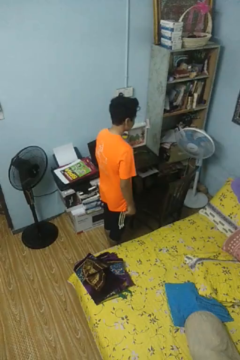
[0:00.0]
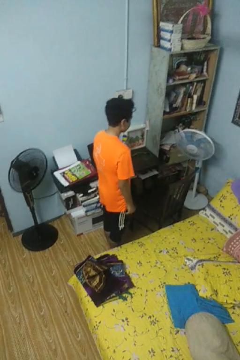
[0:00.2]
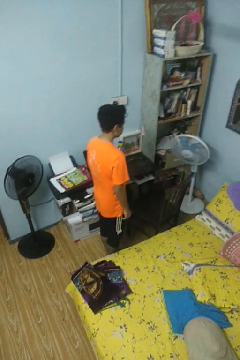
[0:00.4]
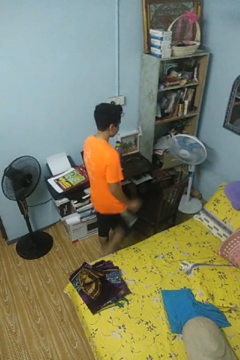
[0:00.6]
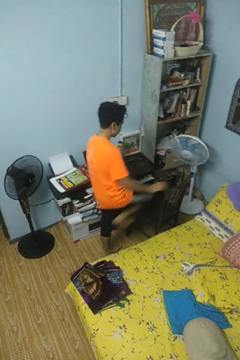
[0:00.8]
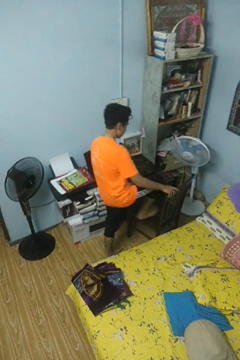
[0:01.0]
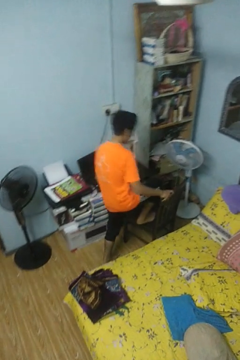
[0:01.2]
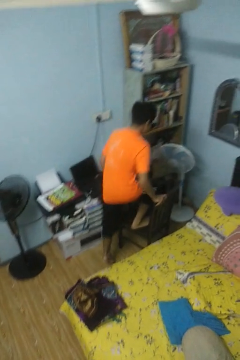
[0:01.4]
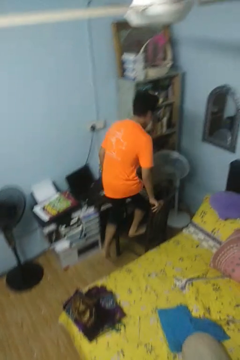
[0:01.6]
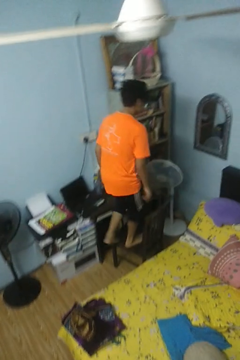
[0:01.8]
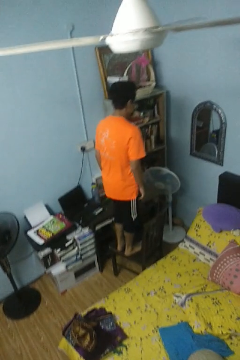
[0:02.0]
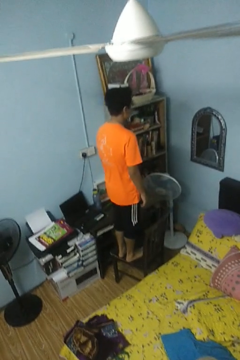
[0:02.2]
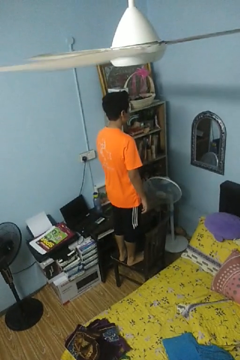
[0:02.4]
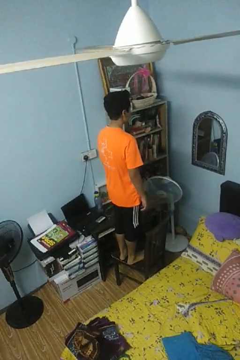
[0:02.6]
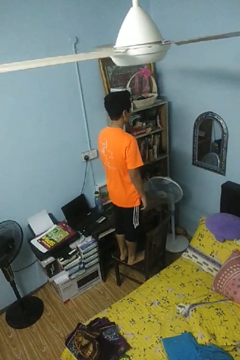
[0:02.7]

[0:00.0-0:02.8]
person climbs on chair

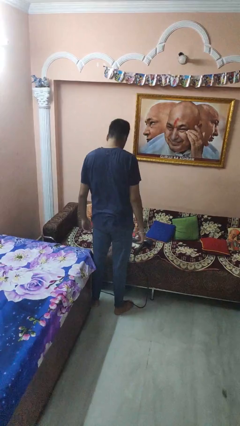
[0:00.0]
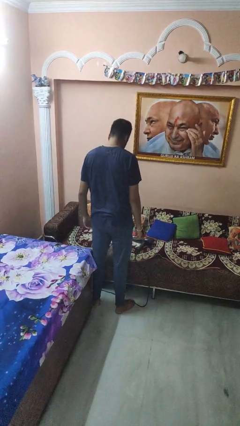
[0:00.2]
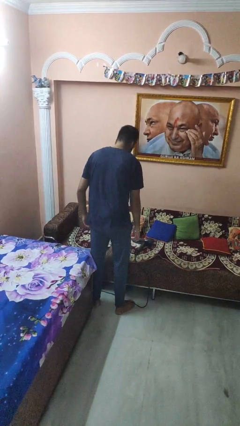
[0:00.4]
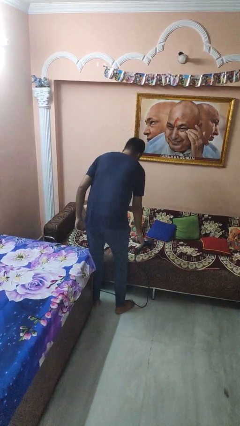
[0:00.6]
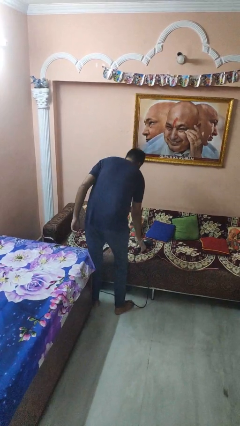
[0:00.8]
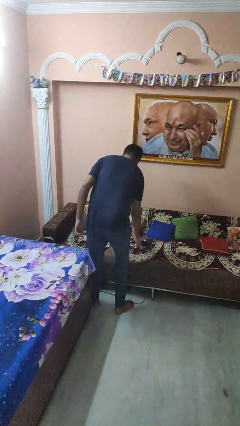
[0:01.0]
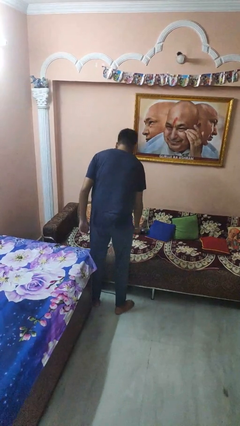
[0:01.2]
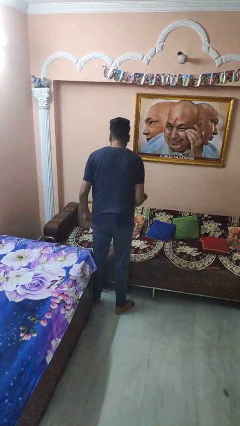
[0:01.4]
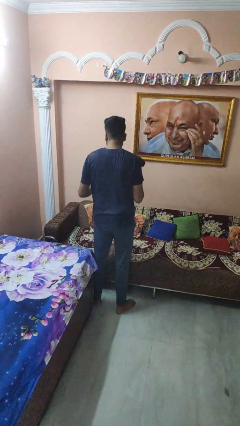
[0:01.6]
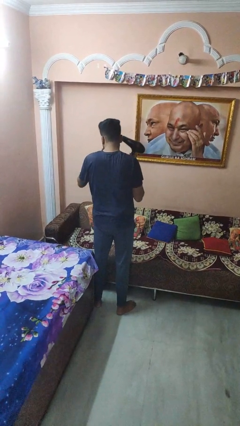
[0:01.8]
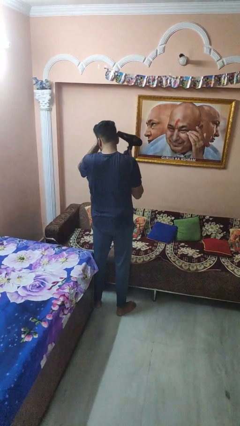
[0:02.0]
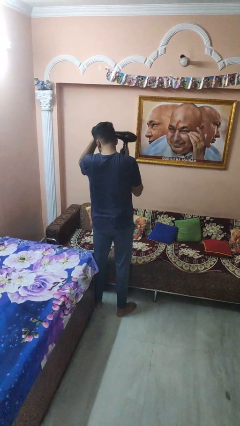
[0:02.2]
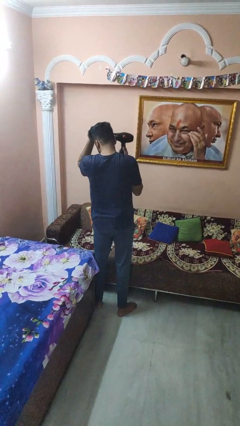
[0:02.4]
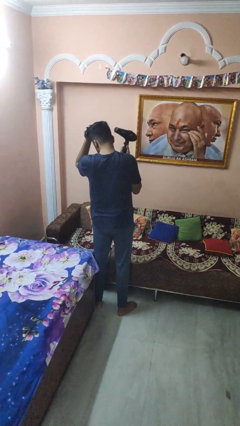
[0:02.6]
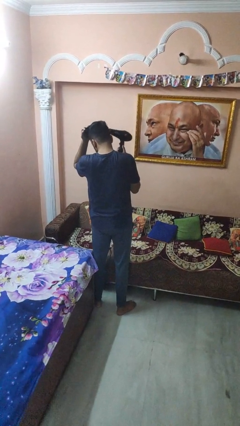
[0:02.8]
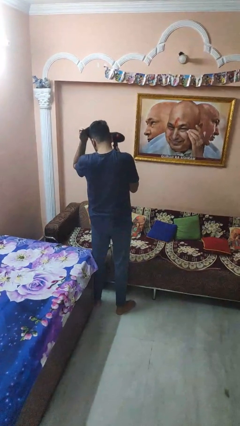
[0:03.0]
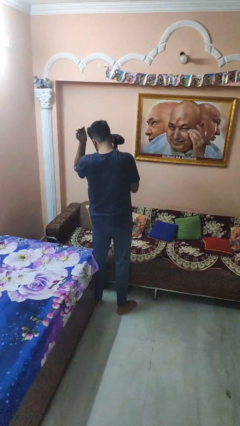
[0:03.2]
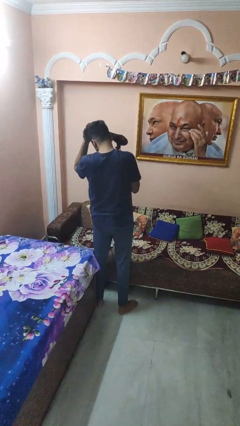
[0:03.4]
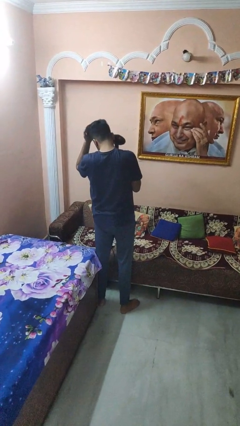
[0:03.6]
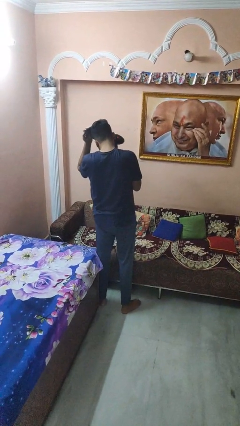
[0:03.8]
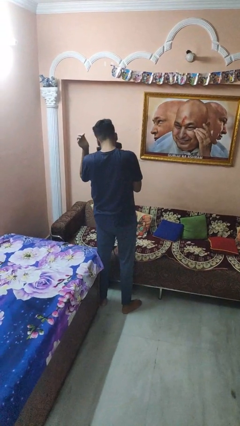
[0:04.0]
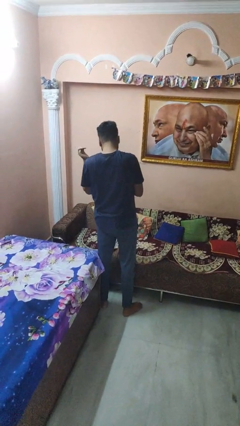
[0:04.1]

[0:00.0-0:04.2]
person dries hair with hairdryer

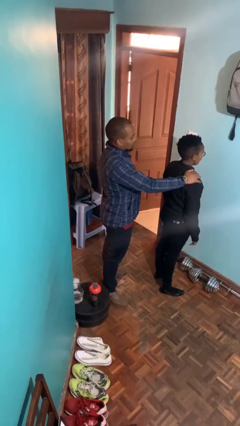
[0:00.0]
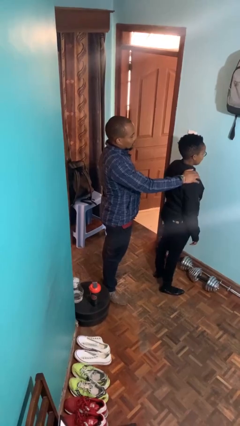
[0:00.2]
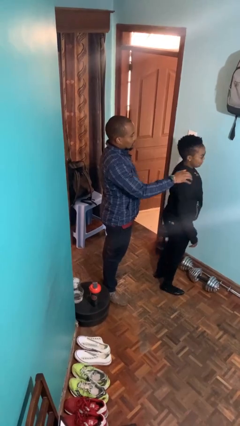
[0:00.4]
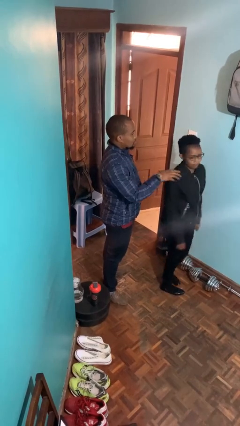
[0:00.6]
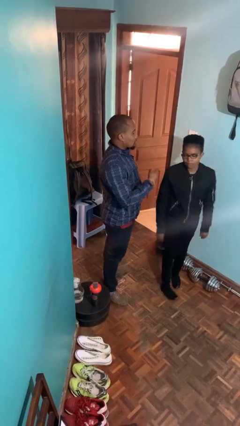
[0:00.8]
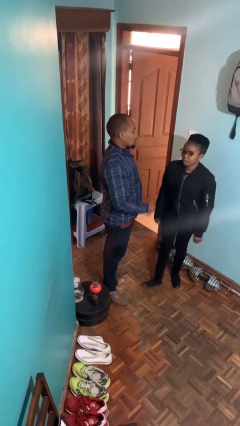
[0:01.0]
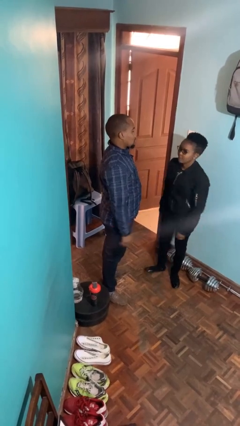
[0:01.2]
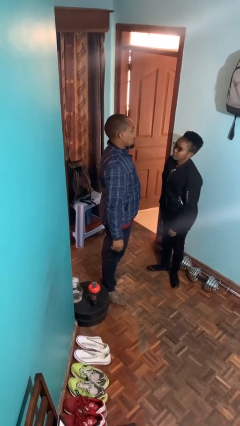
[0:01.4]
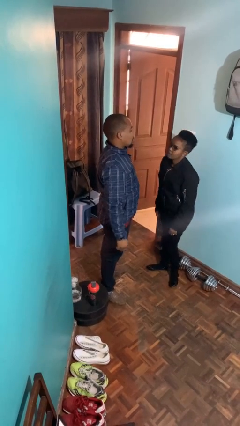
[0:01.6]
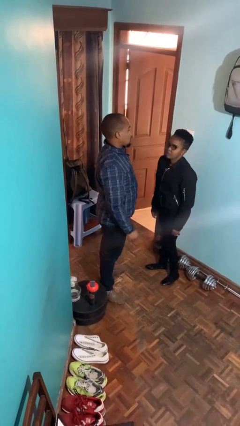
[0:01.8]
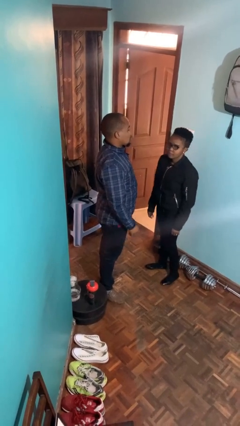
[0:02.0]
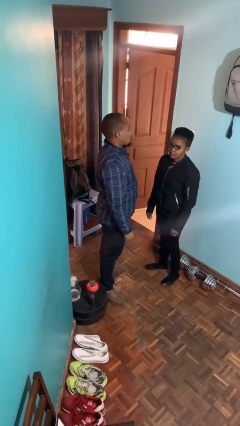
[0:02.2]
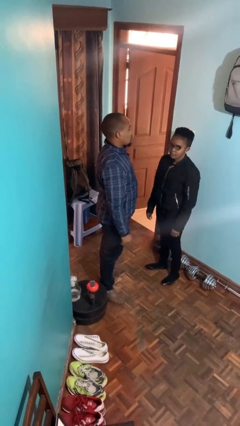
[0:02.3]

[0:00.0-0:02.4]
person spins person around

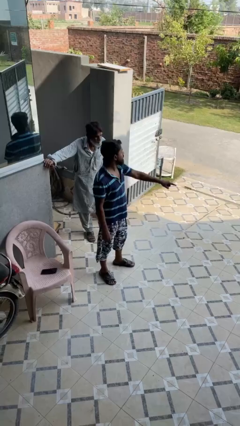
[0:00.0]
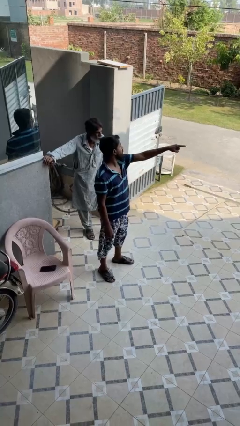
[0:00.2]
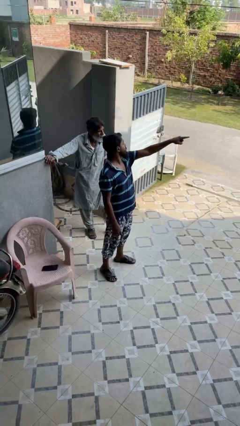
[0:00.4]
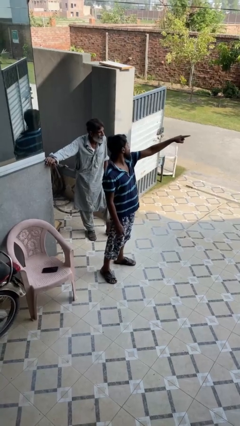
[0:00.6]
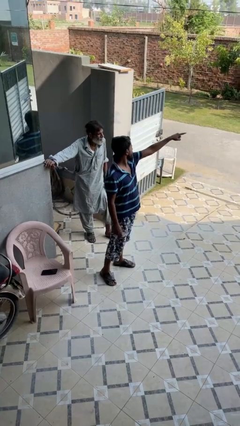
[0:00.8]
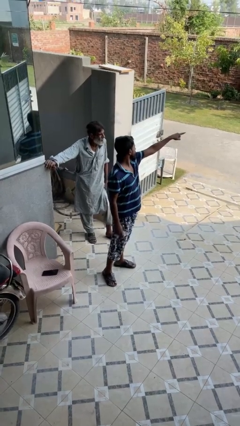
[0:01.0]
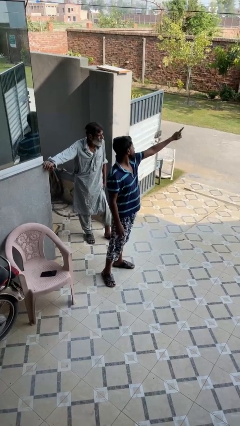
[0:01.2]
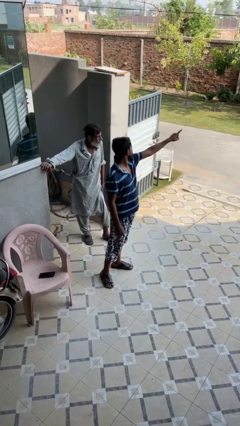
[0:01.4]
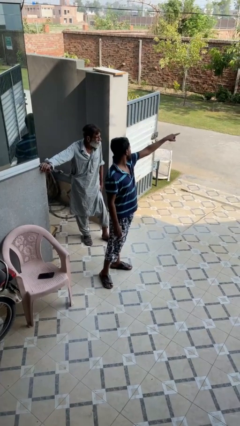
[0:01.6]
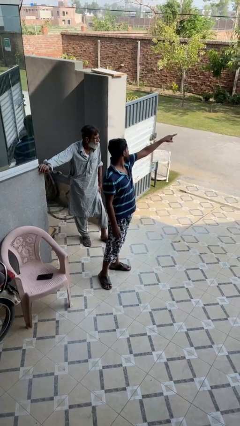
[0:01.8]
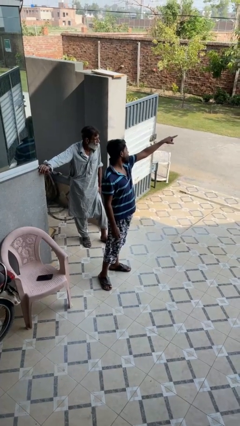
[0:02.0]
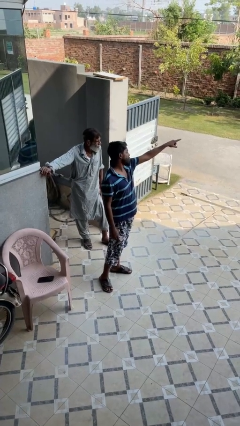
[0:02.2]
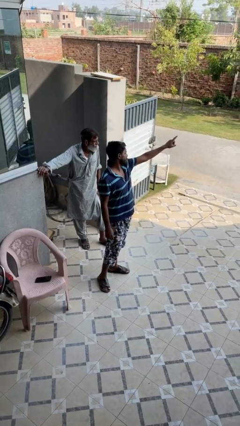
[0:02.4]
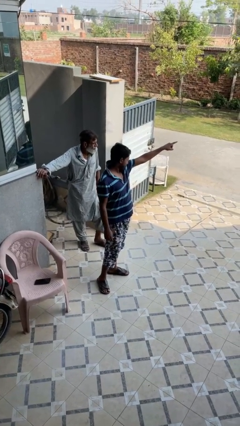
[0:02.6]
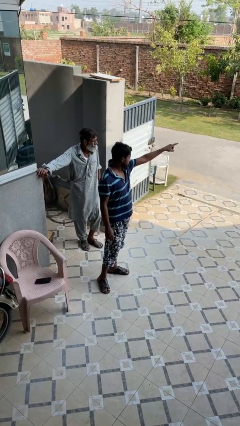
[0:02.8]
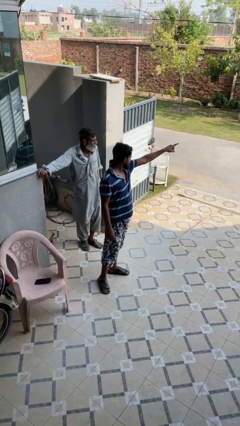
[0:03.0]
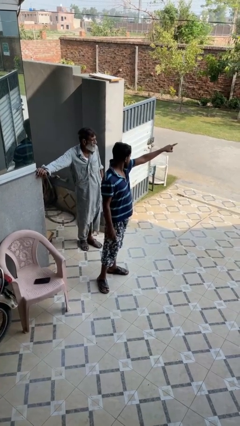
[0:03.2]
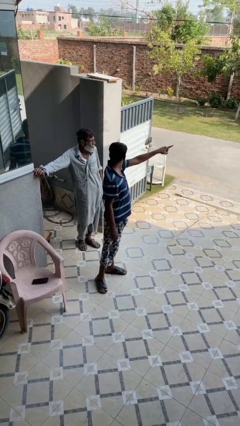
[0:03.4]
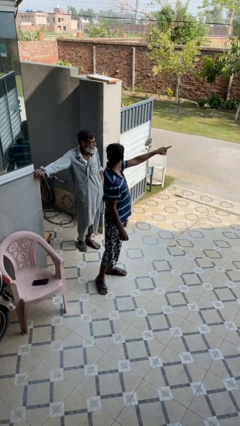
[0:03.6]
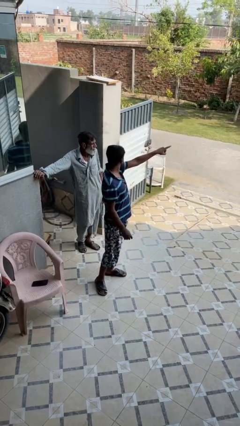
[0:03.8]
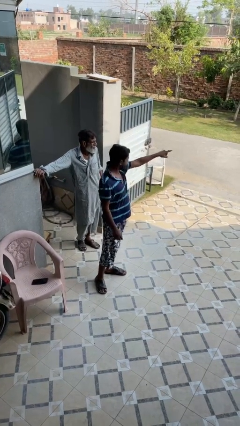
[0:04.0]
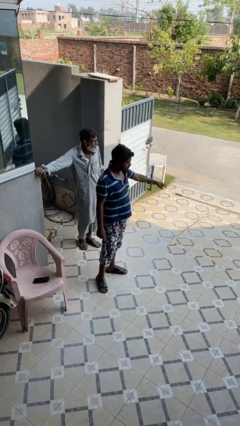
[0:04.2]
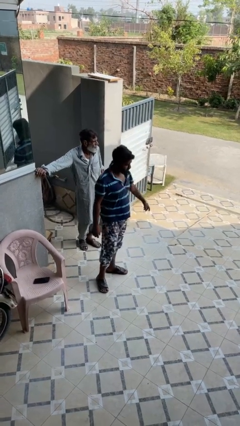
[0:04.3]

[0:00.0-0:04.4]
person points at person

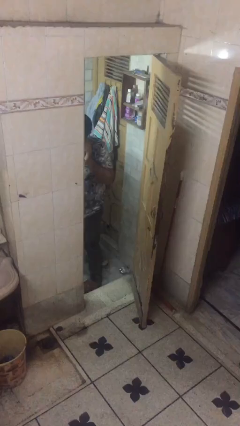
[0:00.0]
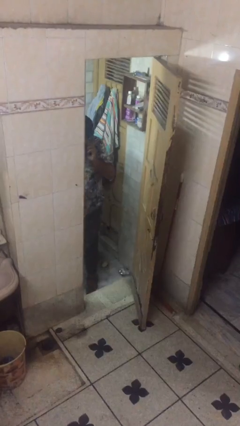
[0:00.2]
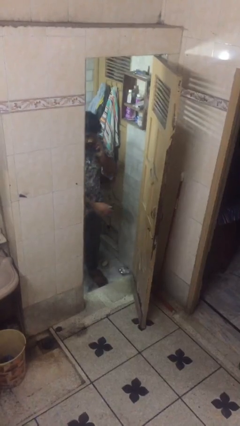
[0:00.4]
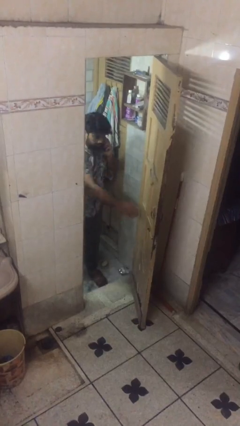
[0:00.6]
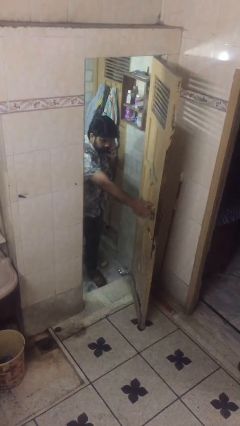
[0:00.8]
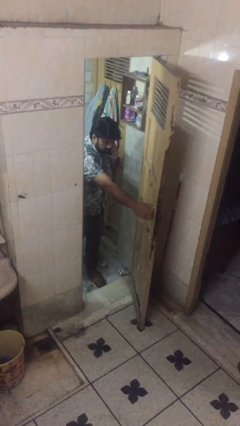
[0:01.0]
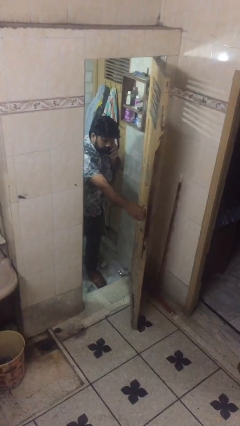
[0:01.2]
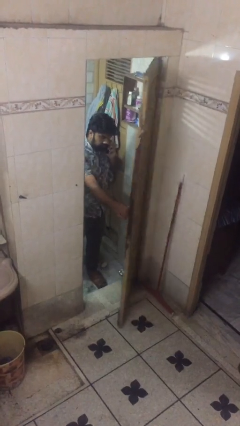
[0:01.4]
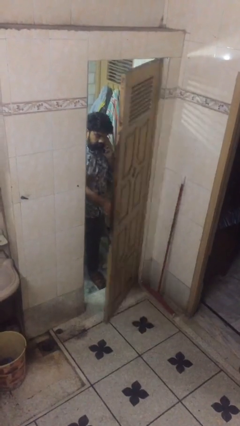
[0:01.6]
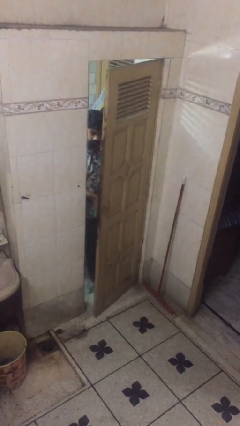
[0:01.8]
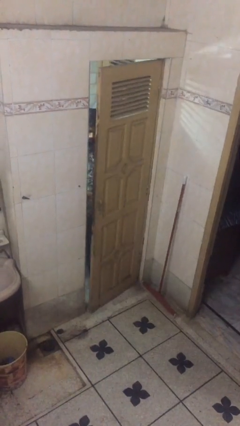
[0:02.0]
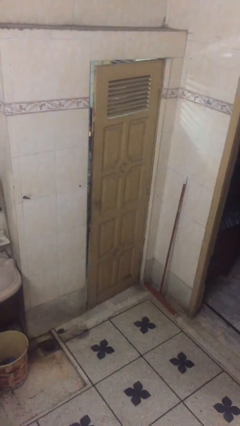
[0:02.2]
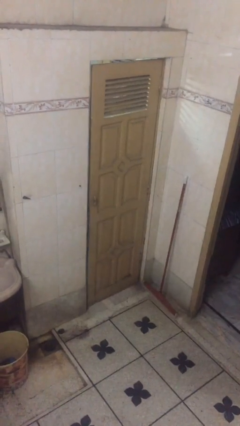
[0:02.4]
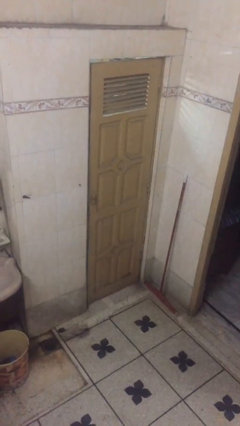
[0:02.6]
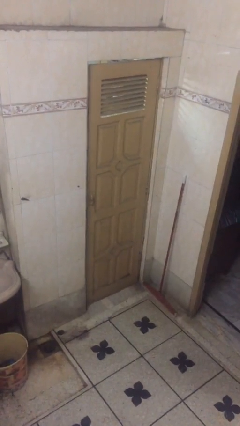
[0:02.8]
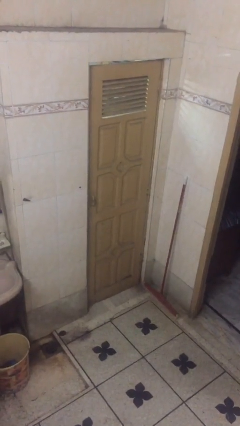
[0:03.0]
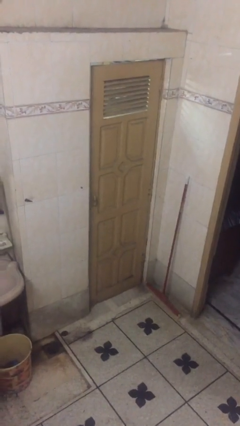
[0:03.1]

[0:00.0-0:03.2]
person closes facility door

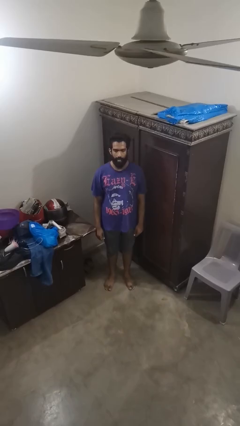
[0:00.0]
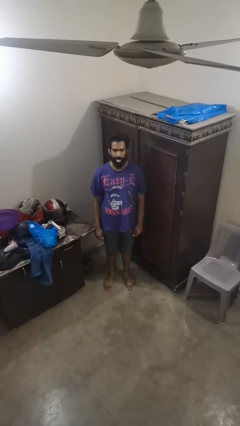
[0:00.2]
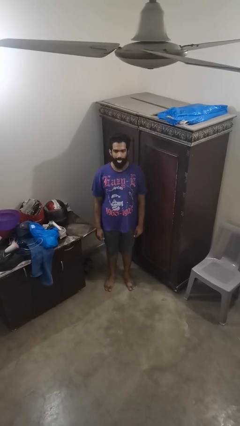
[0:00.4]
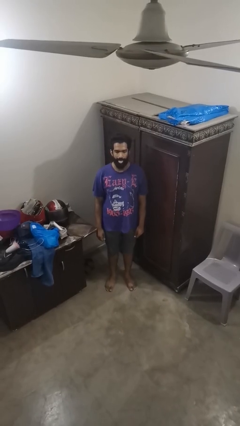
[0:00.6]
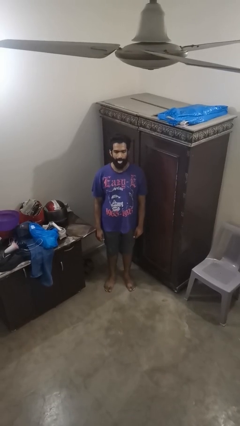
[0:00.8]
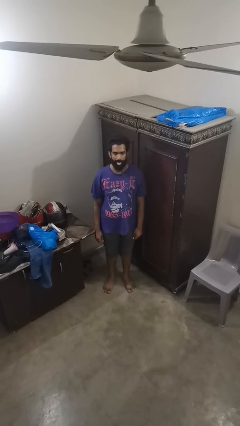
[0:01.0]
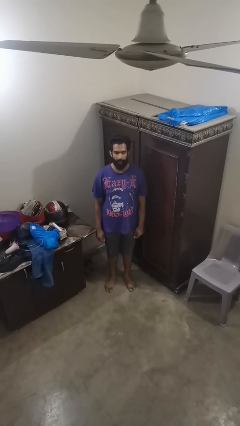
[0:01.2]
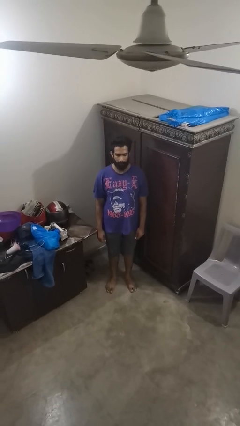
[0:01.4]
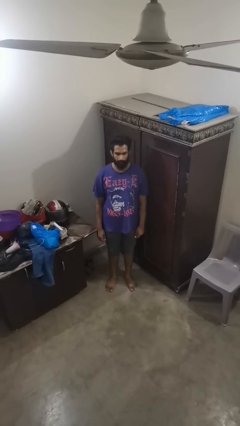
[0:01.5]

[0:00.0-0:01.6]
person sticks out tongue
